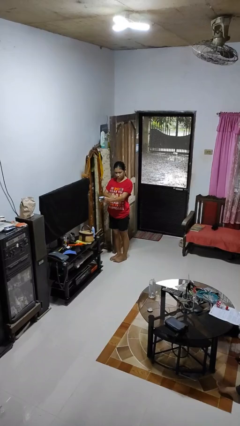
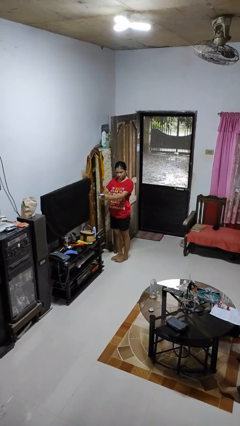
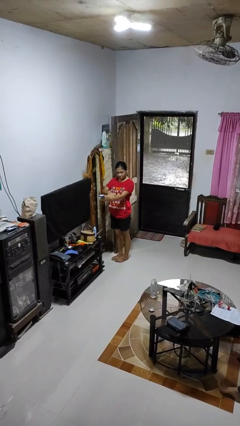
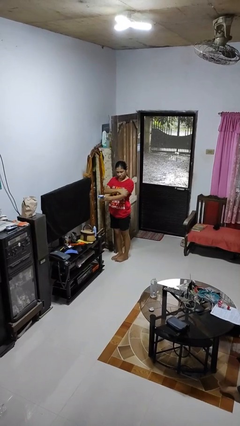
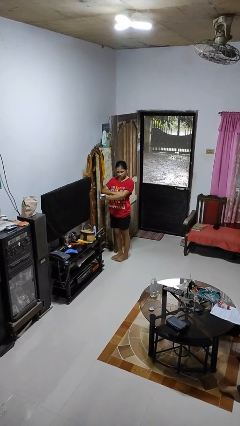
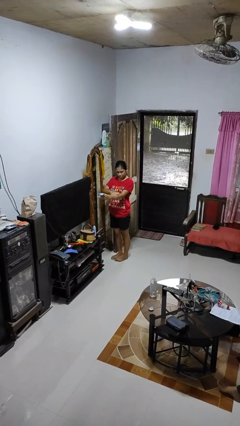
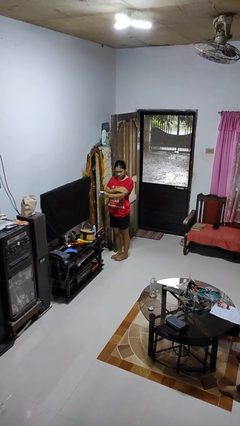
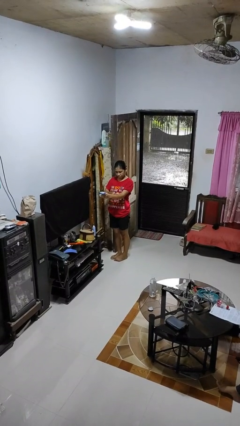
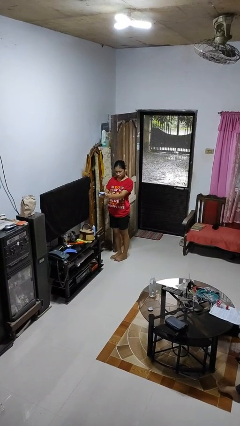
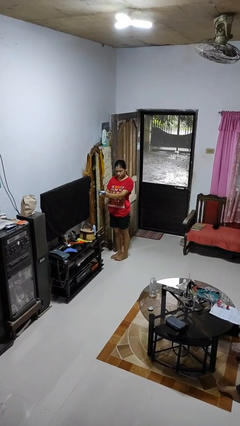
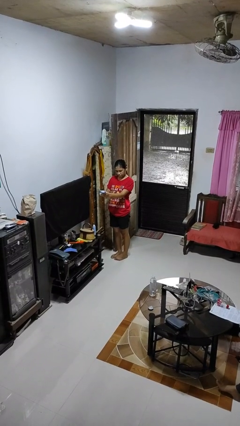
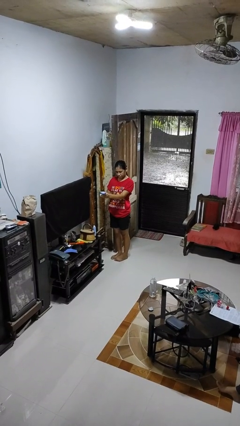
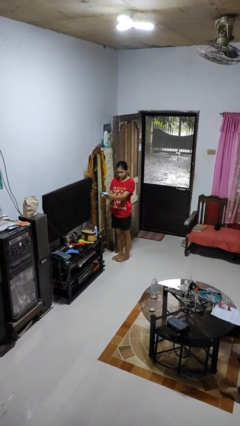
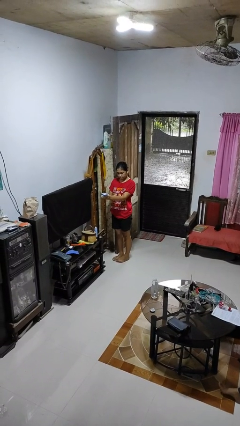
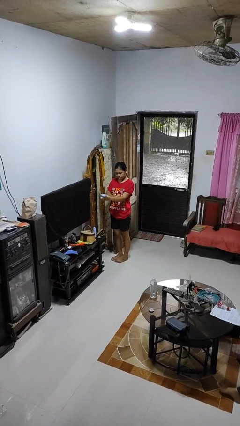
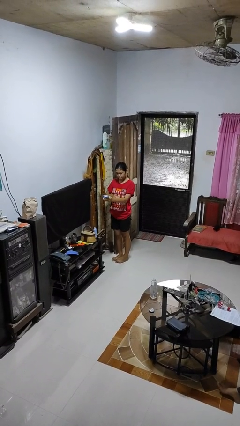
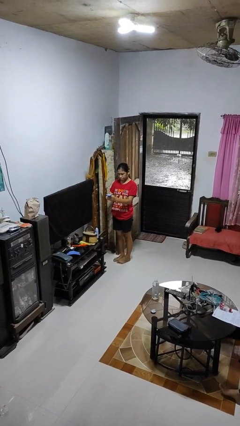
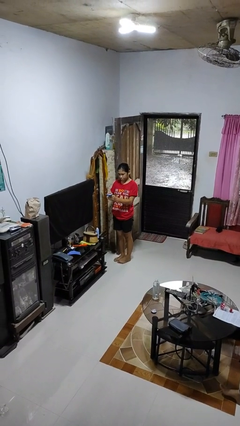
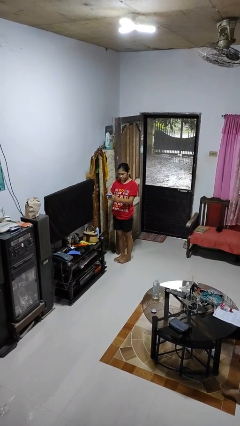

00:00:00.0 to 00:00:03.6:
person applies sunscreen

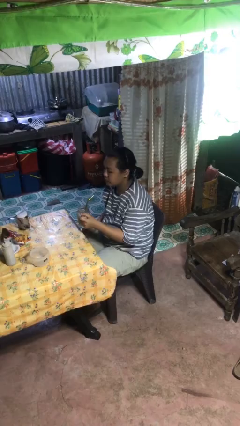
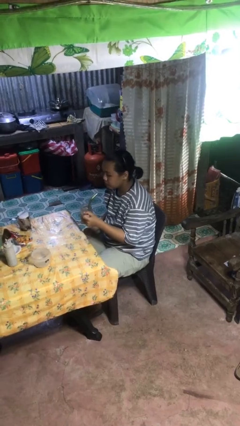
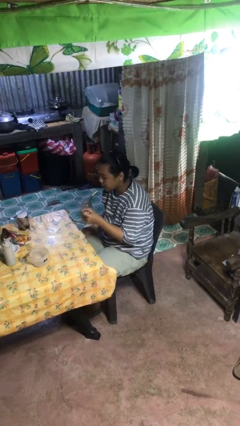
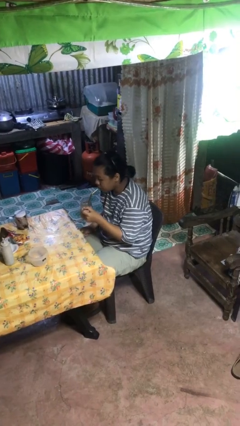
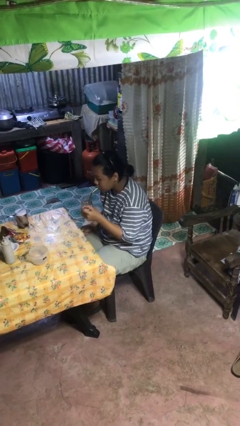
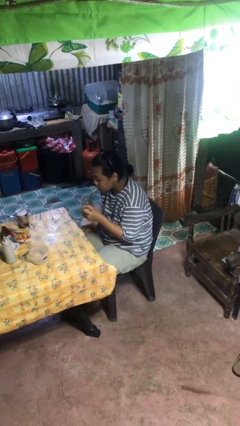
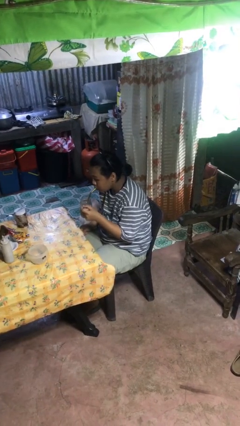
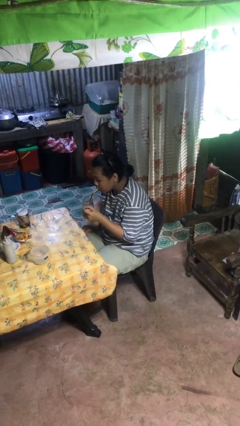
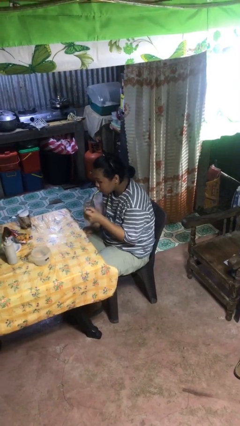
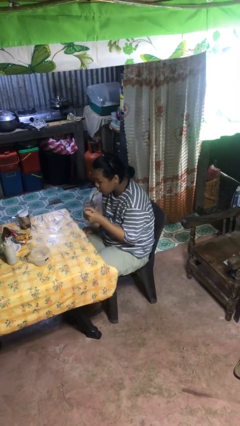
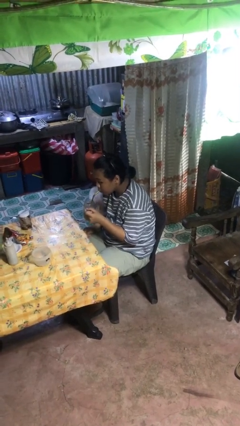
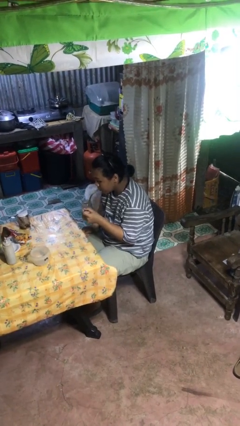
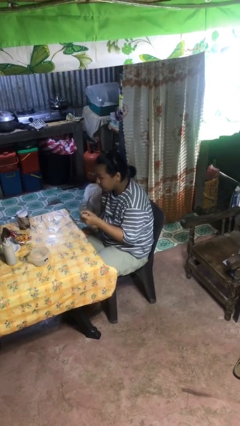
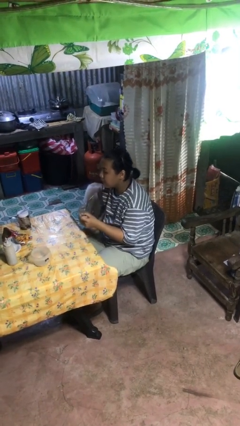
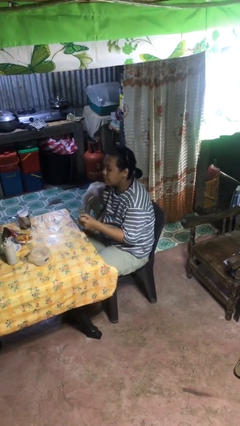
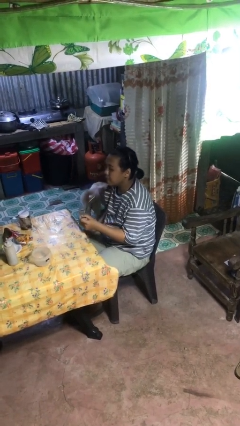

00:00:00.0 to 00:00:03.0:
person drinks from straw

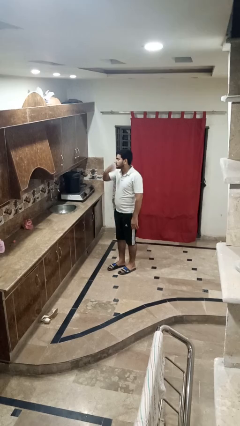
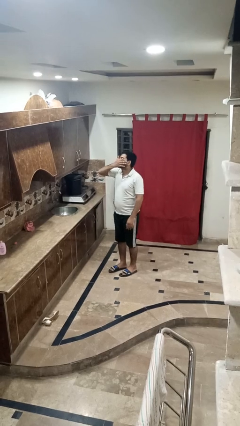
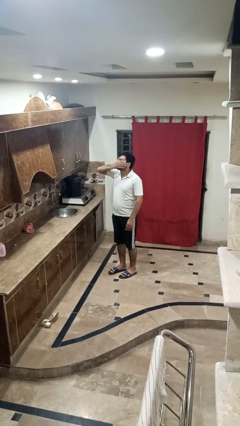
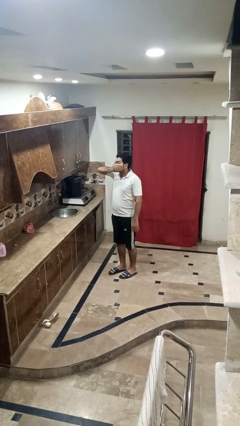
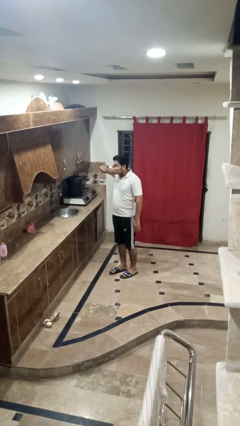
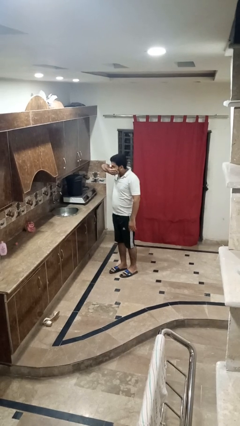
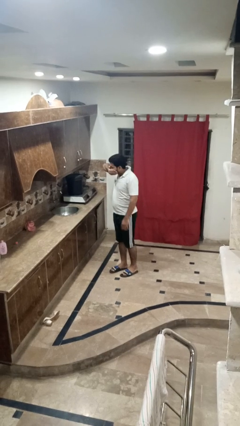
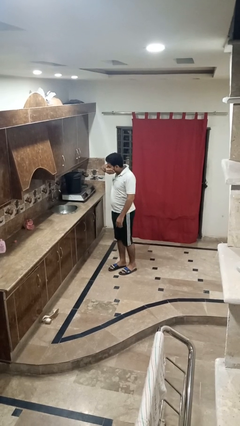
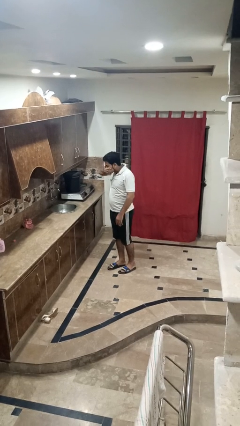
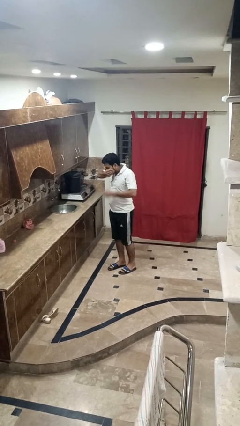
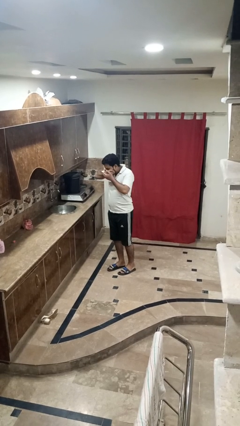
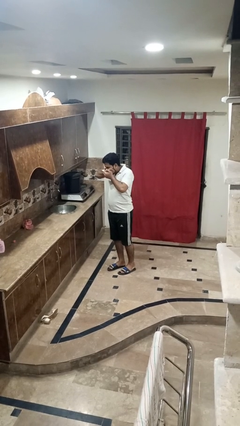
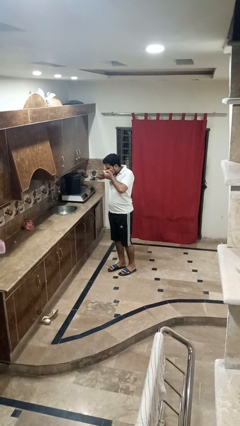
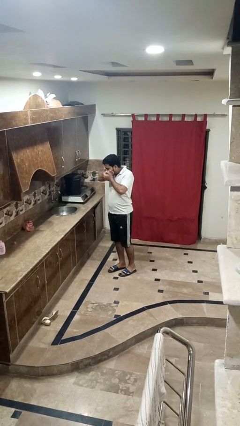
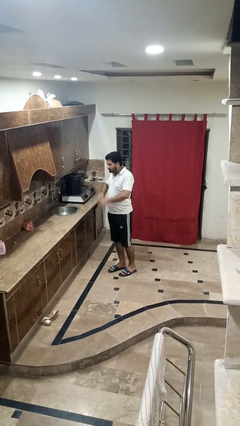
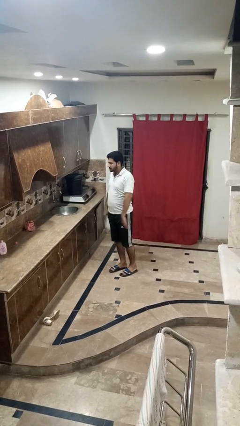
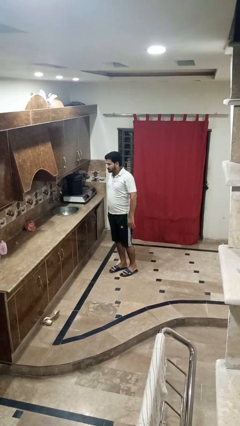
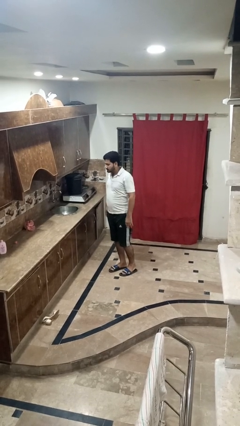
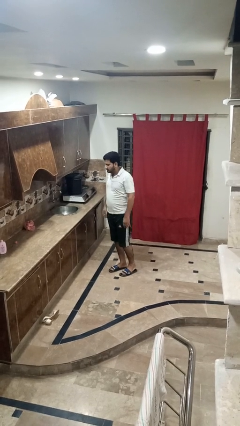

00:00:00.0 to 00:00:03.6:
person sneezes into hand

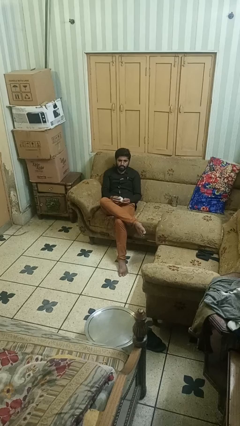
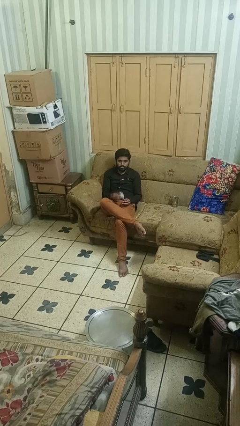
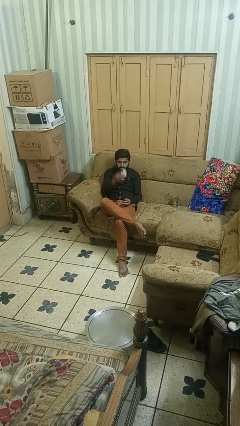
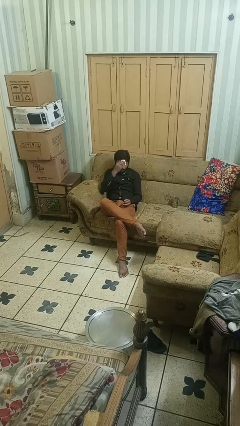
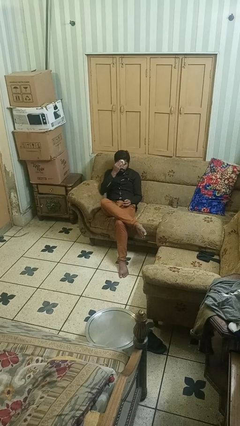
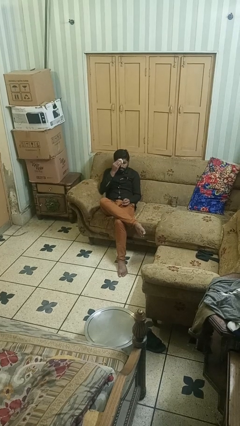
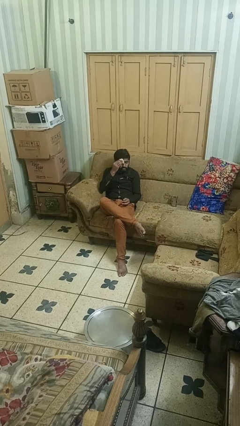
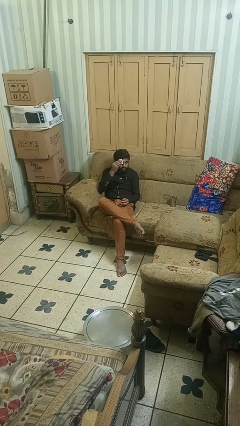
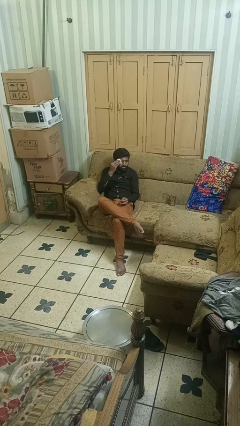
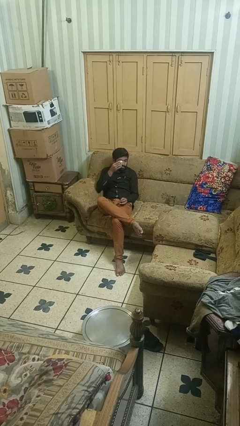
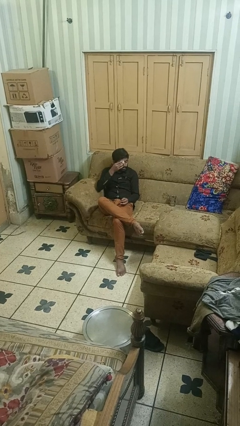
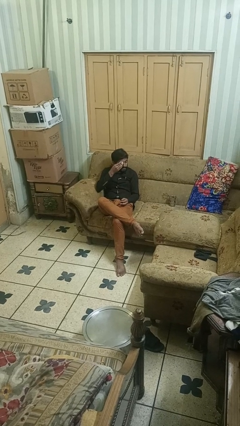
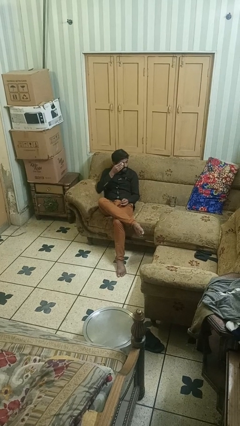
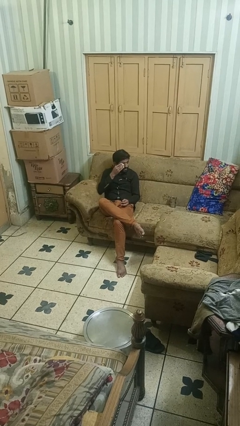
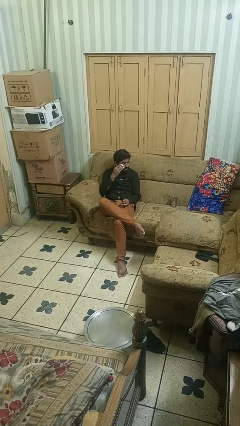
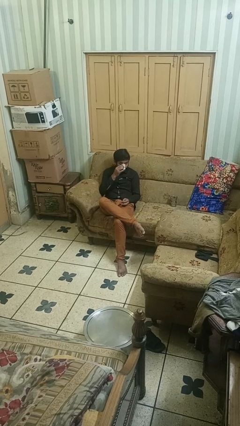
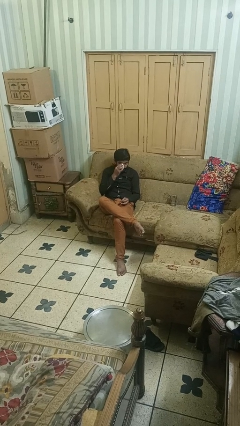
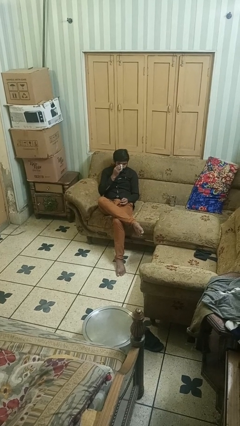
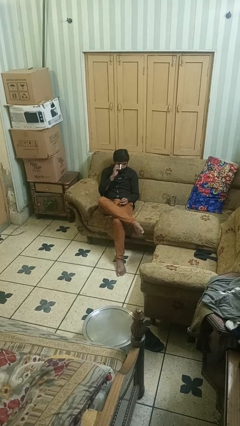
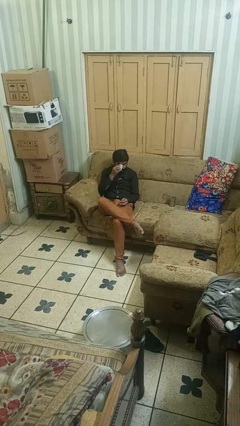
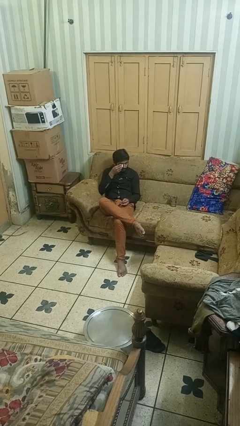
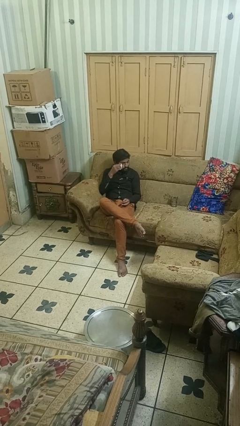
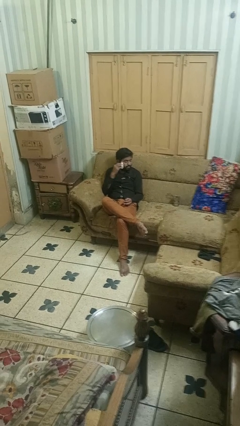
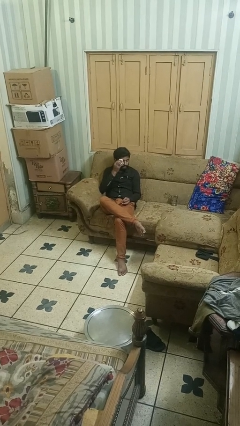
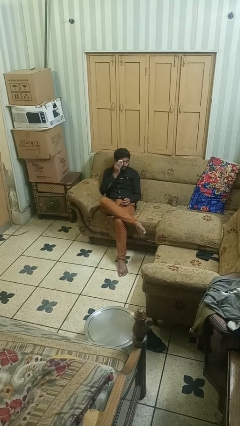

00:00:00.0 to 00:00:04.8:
person wipes mouth with napkin

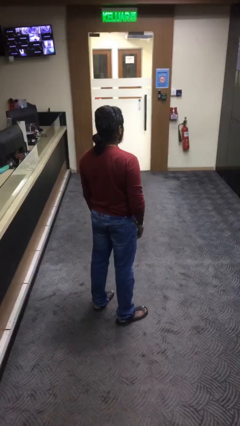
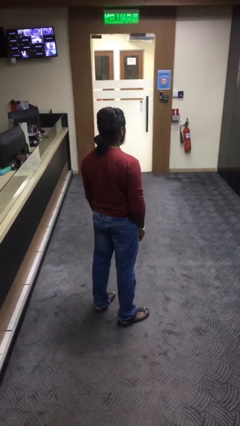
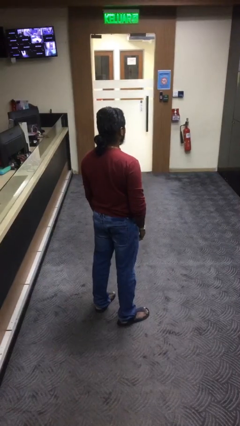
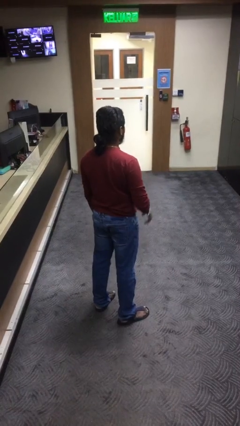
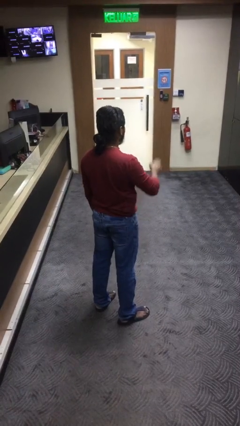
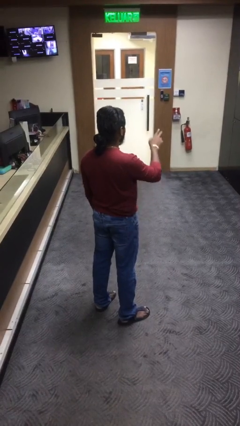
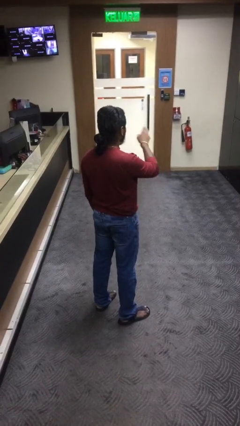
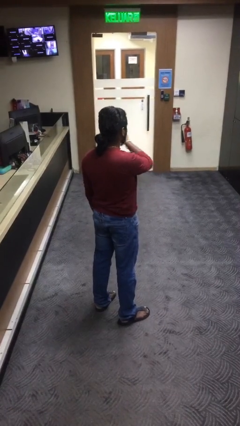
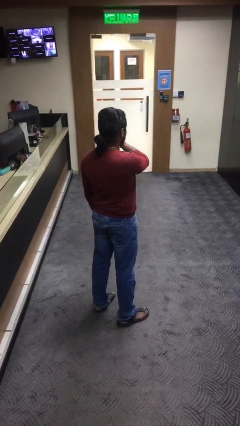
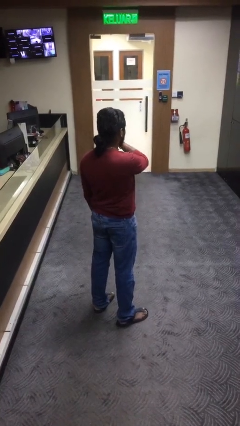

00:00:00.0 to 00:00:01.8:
person gestures swipe left

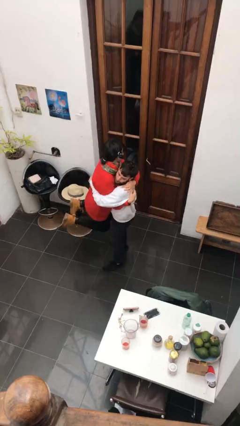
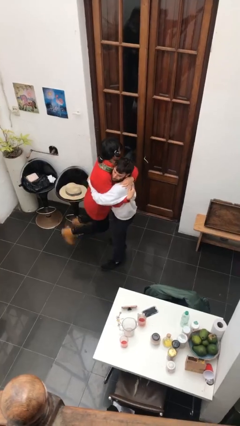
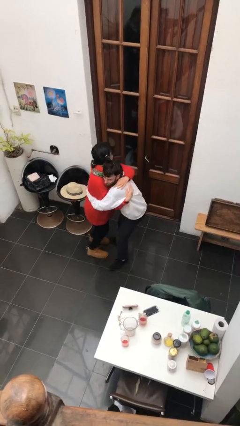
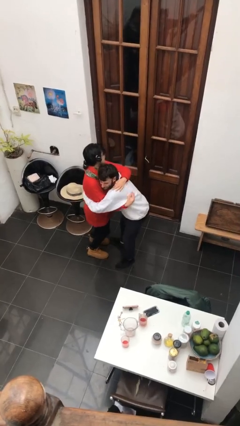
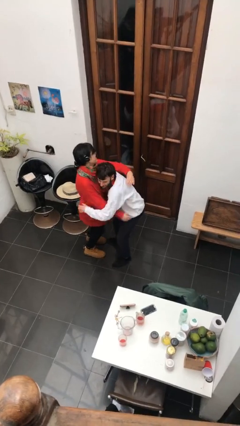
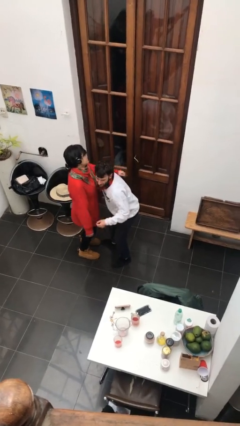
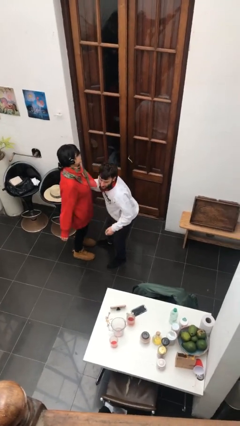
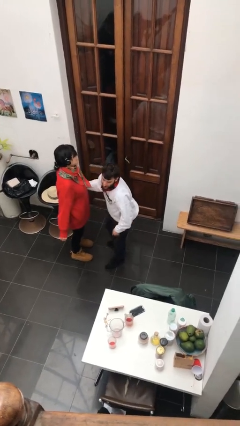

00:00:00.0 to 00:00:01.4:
person puts down person
